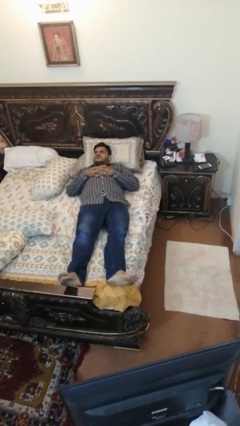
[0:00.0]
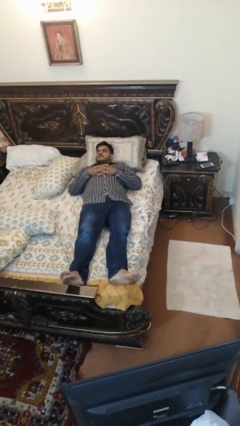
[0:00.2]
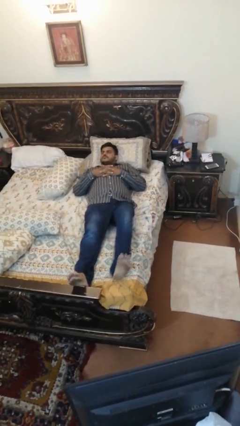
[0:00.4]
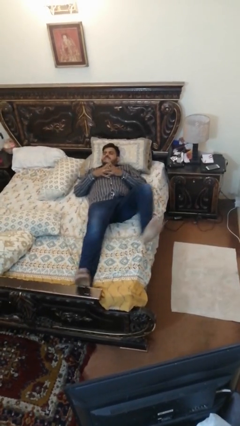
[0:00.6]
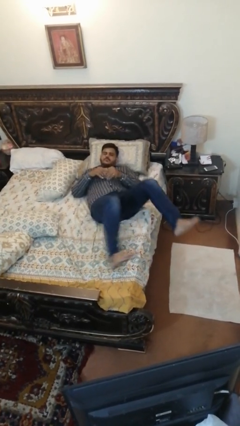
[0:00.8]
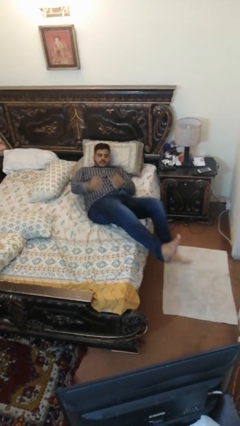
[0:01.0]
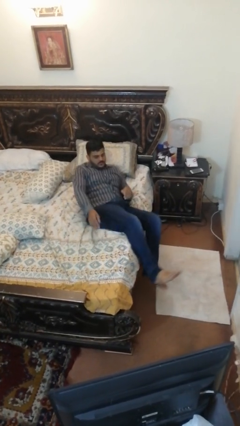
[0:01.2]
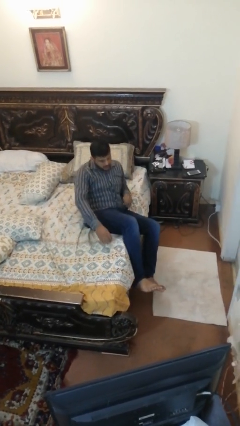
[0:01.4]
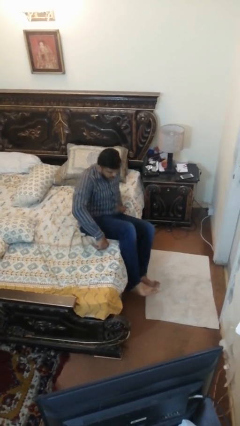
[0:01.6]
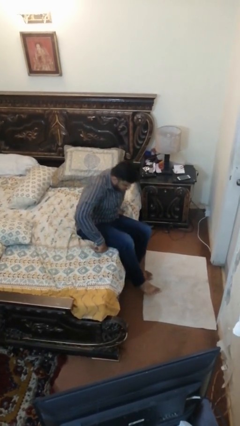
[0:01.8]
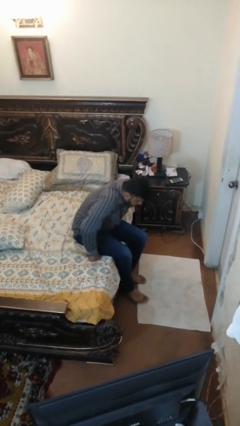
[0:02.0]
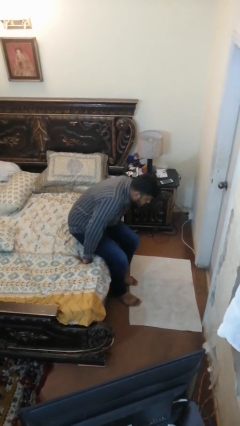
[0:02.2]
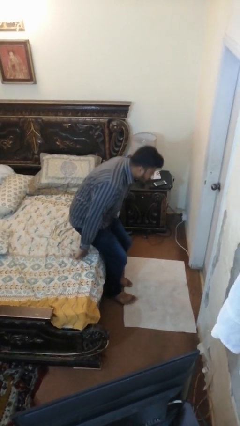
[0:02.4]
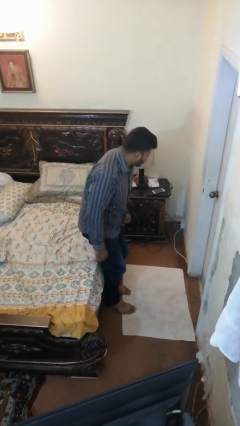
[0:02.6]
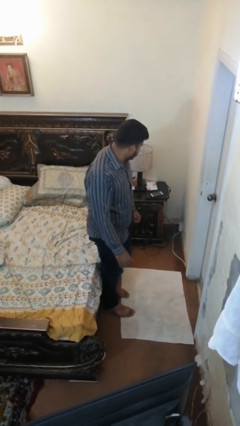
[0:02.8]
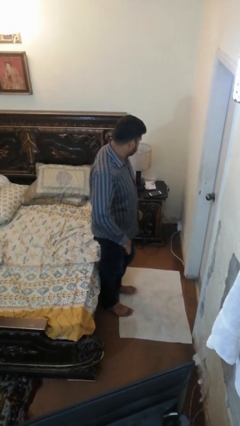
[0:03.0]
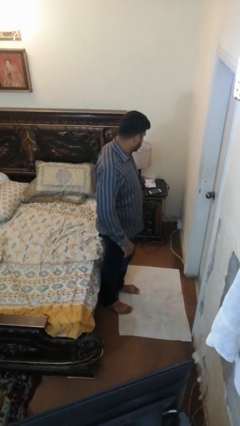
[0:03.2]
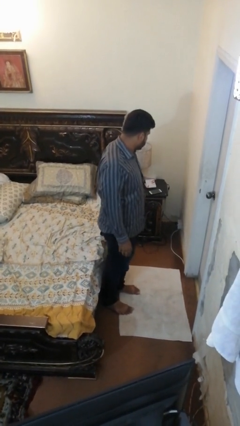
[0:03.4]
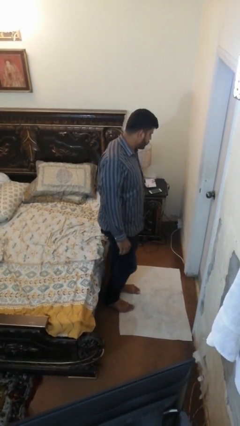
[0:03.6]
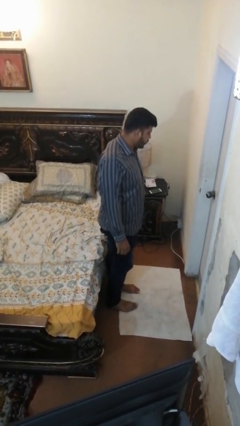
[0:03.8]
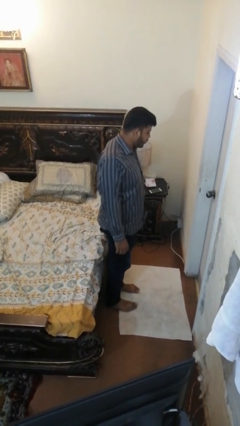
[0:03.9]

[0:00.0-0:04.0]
person stands up

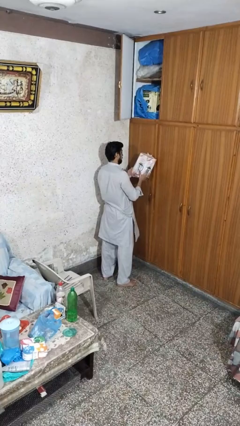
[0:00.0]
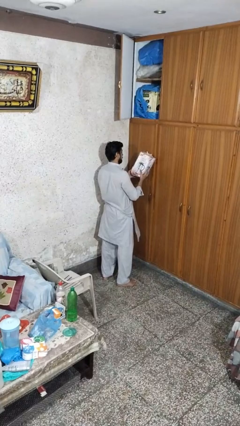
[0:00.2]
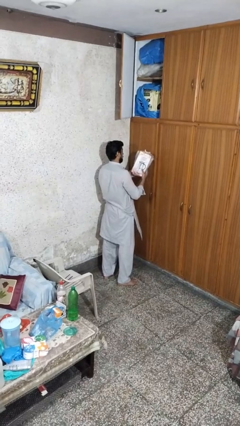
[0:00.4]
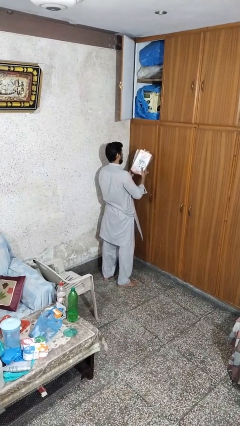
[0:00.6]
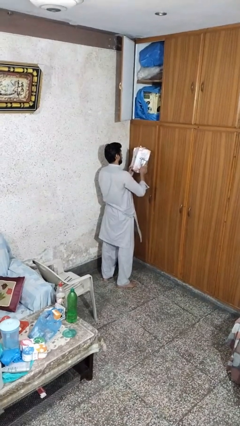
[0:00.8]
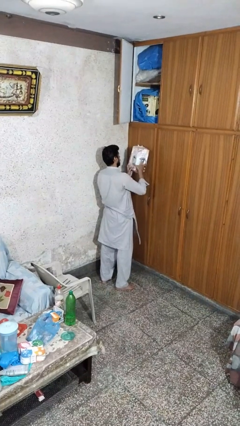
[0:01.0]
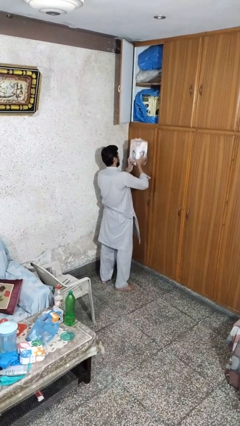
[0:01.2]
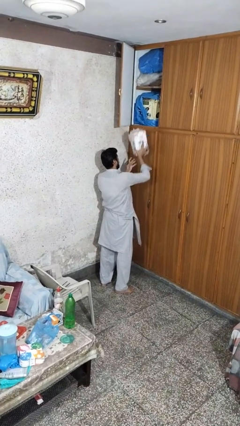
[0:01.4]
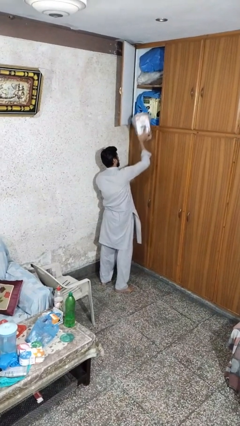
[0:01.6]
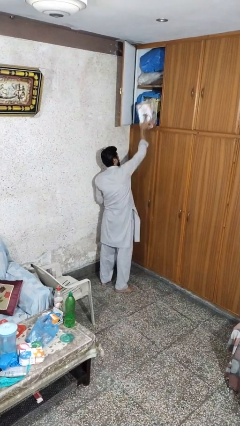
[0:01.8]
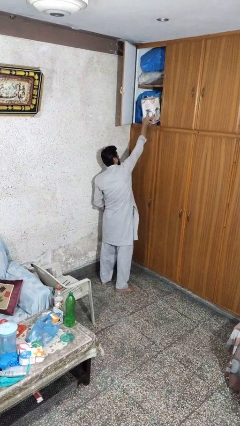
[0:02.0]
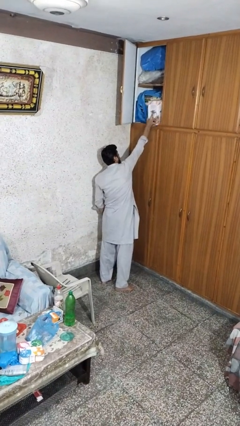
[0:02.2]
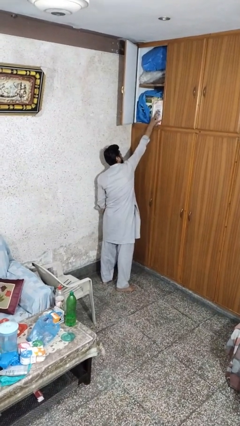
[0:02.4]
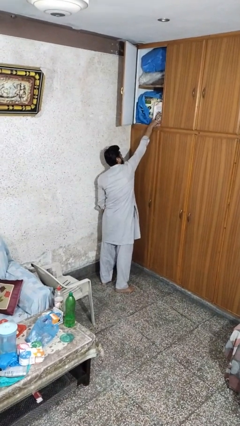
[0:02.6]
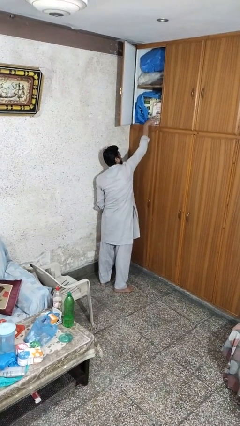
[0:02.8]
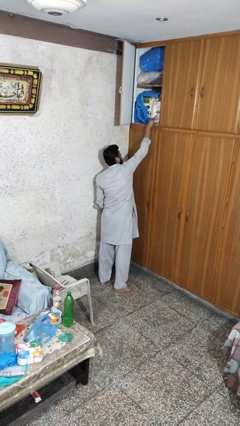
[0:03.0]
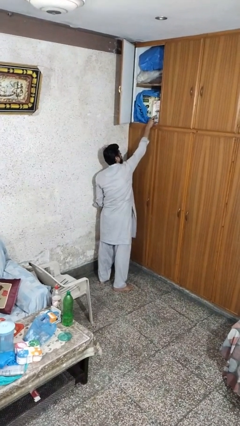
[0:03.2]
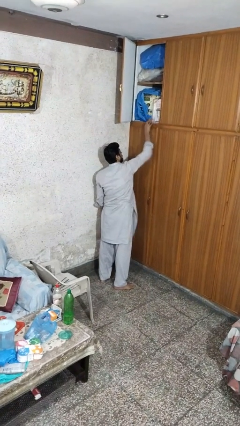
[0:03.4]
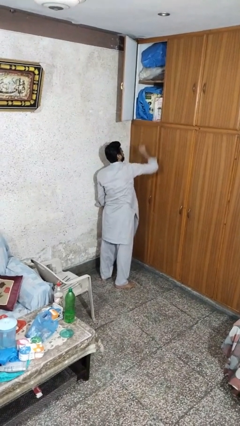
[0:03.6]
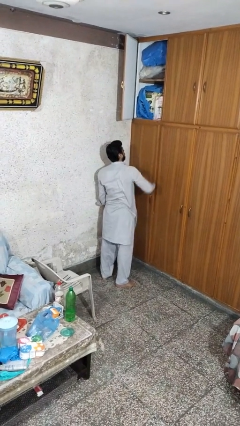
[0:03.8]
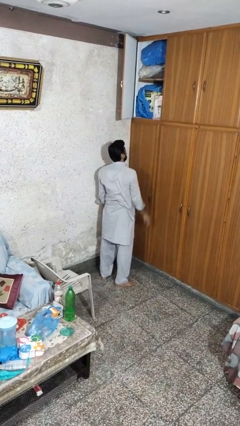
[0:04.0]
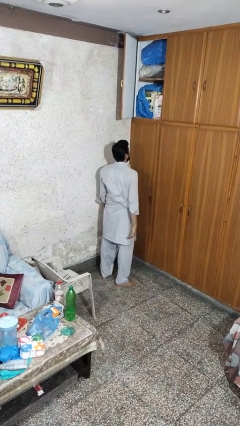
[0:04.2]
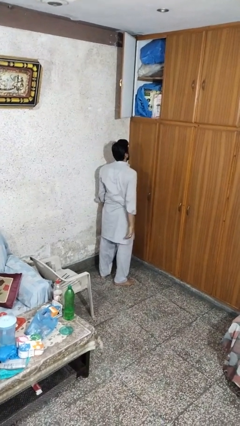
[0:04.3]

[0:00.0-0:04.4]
person puts down object on countertop

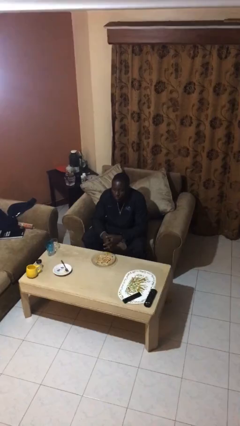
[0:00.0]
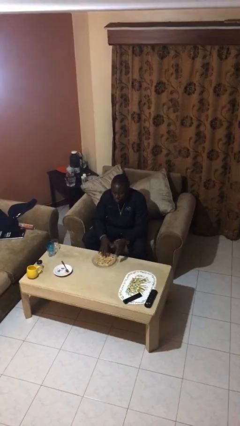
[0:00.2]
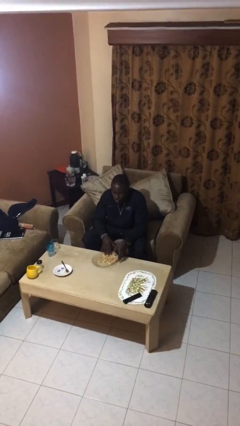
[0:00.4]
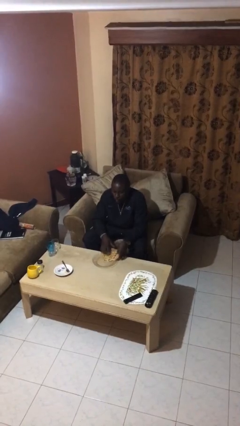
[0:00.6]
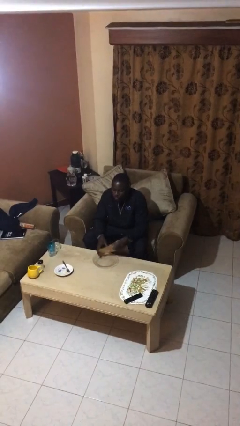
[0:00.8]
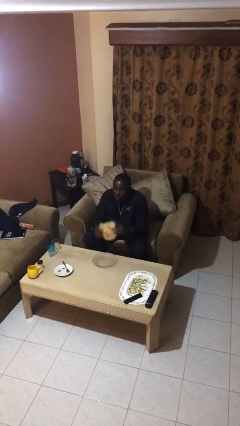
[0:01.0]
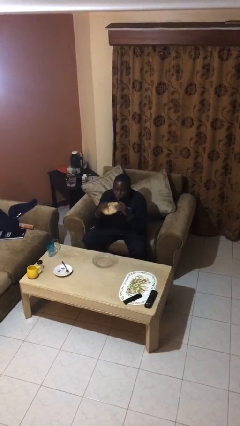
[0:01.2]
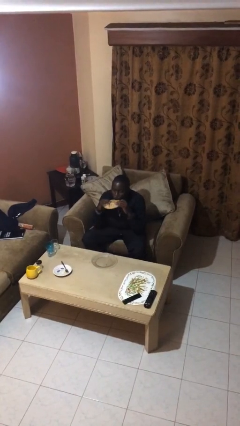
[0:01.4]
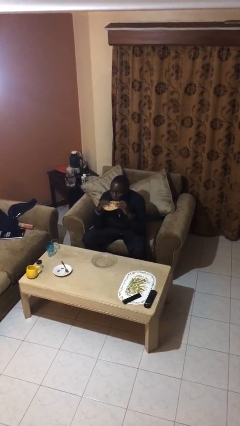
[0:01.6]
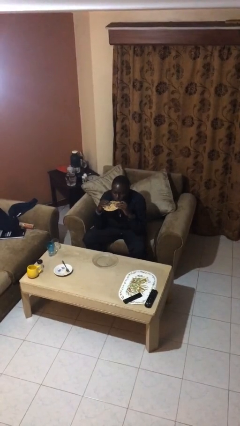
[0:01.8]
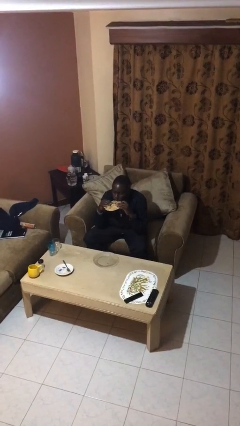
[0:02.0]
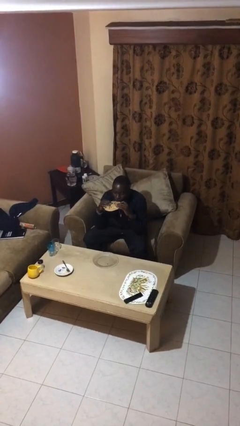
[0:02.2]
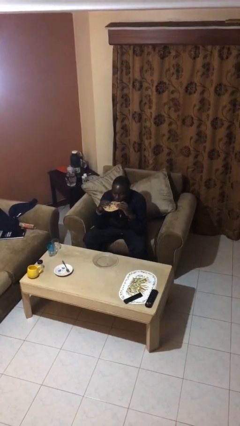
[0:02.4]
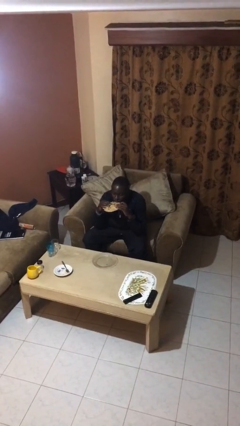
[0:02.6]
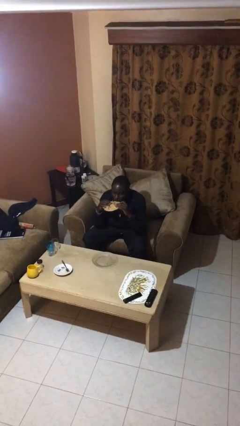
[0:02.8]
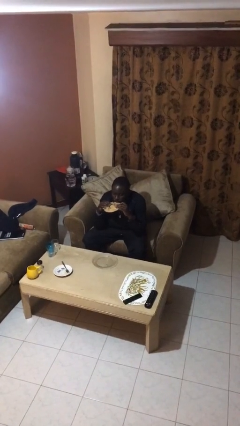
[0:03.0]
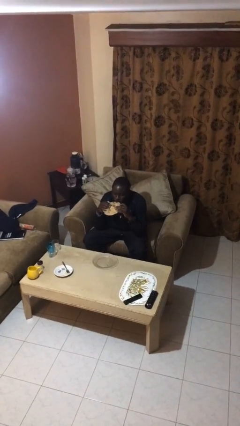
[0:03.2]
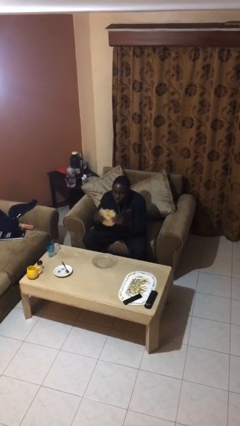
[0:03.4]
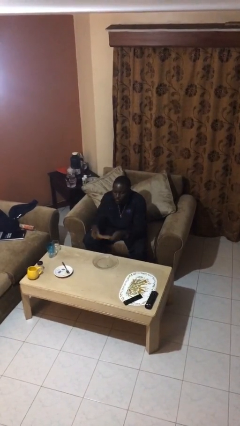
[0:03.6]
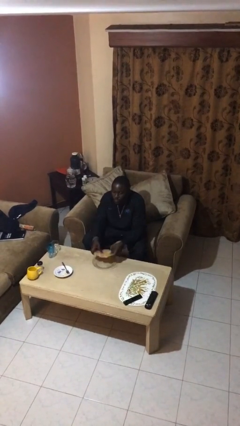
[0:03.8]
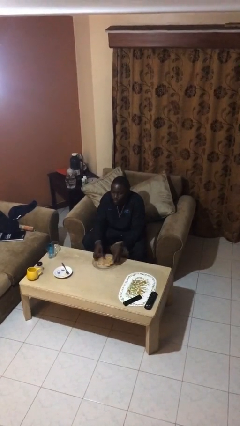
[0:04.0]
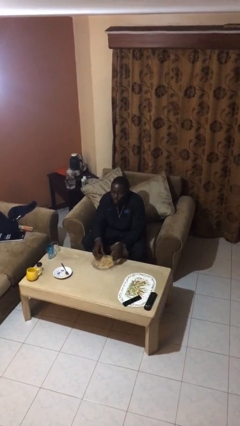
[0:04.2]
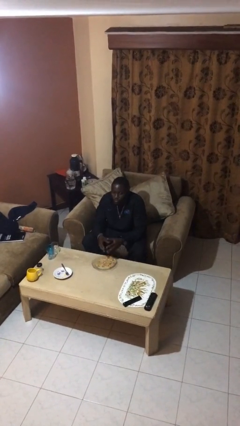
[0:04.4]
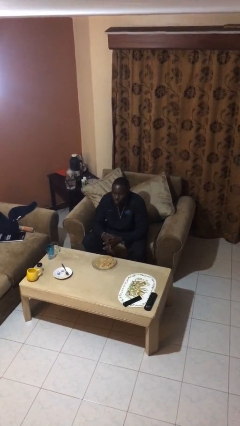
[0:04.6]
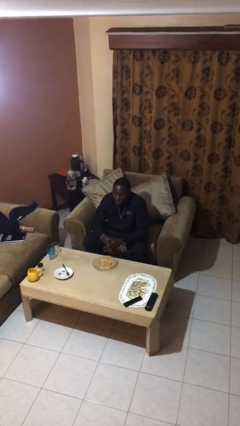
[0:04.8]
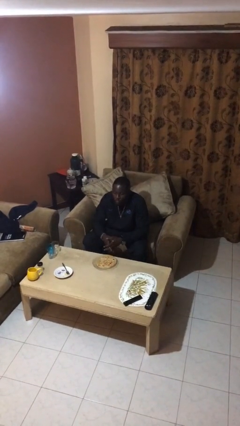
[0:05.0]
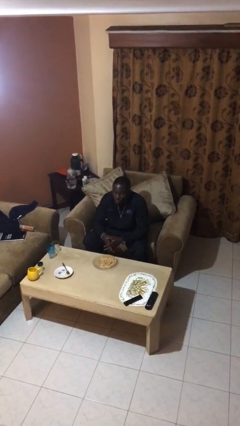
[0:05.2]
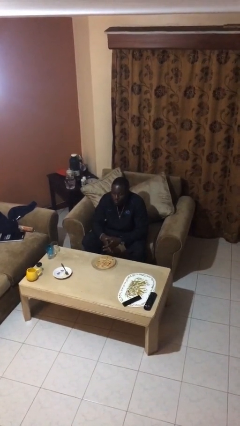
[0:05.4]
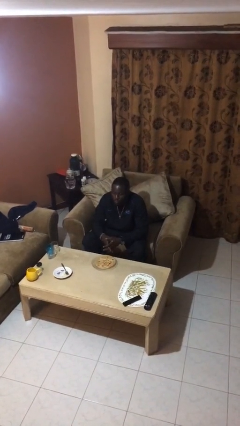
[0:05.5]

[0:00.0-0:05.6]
person eats with hands

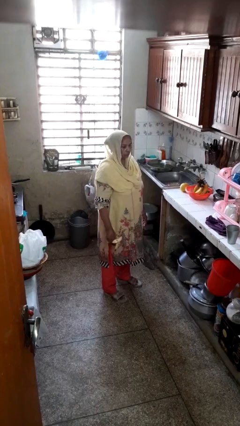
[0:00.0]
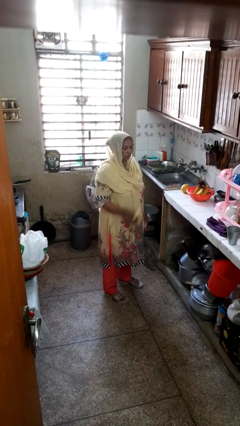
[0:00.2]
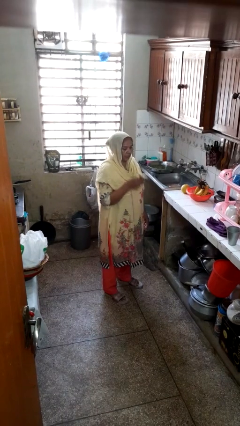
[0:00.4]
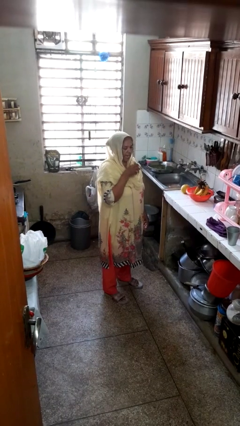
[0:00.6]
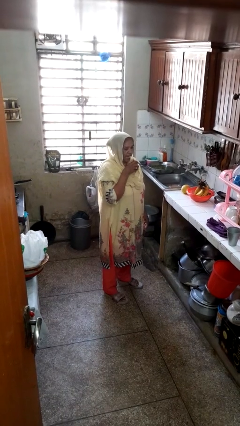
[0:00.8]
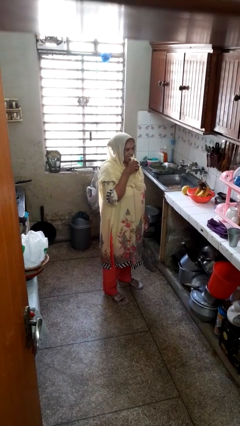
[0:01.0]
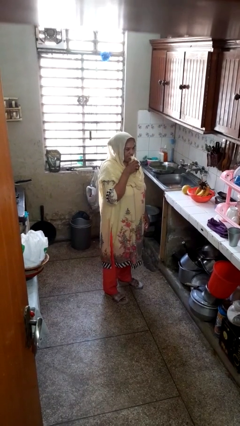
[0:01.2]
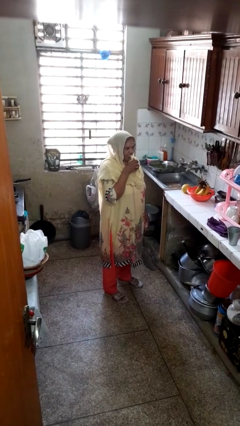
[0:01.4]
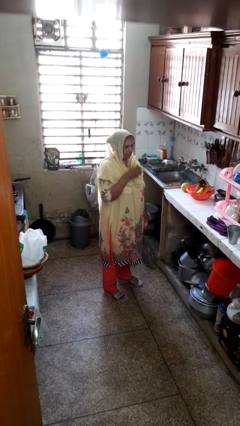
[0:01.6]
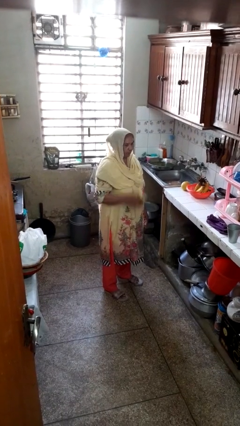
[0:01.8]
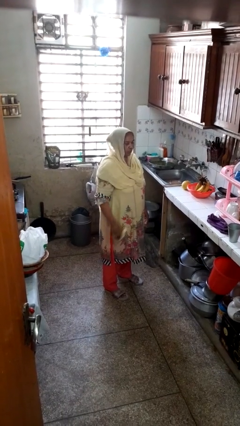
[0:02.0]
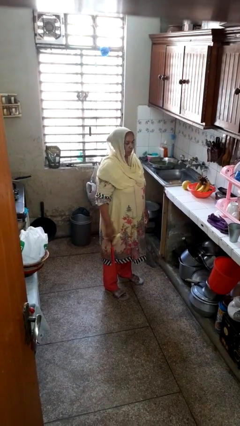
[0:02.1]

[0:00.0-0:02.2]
person eats banana

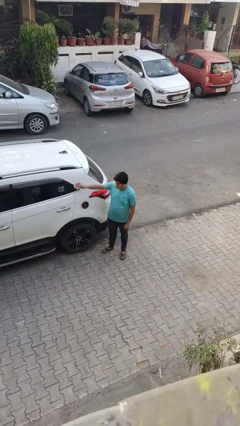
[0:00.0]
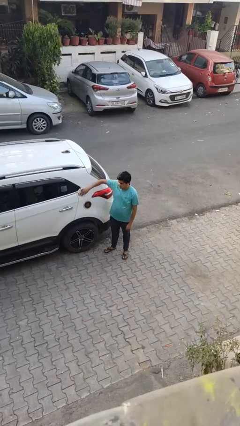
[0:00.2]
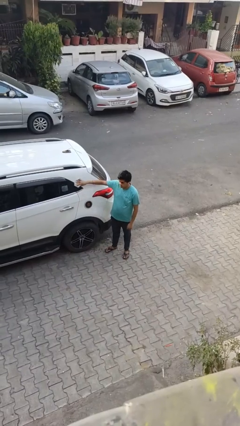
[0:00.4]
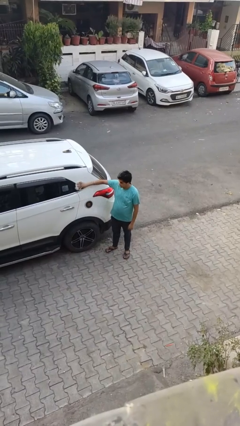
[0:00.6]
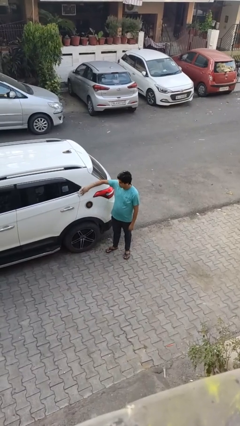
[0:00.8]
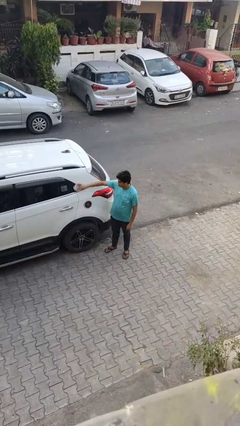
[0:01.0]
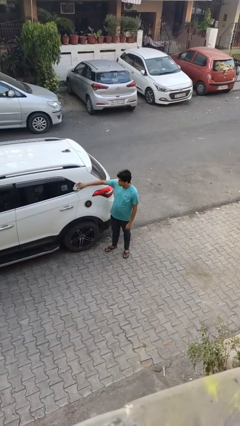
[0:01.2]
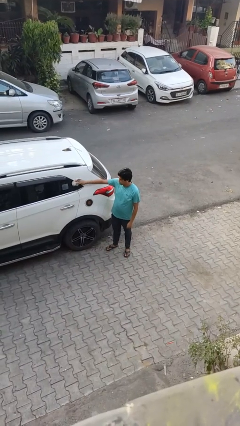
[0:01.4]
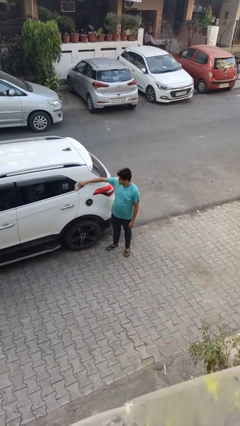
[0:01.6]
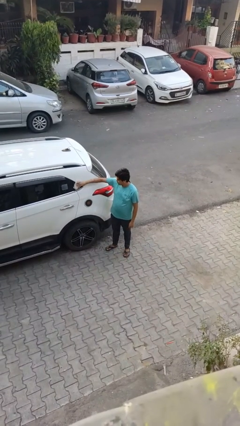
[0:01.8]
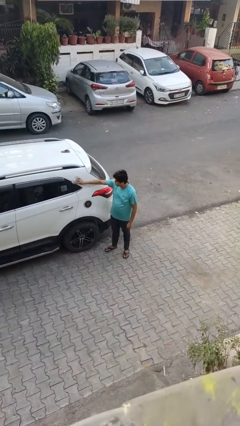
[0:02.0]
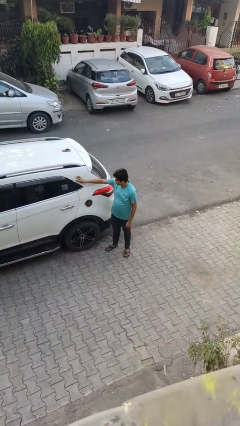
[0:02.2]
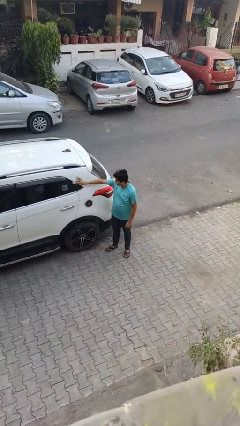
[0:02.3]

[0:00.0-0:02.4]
person polishes car with rag
